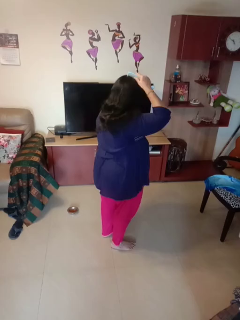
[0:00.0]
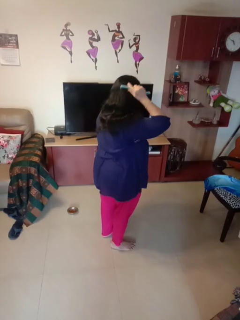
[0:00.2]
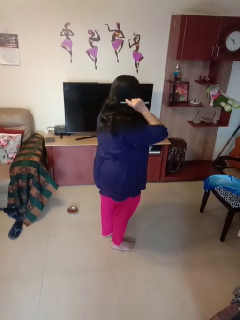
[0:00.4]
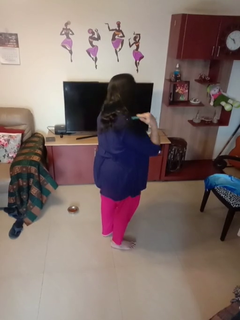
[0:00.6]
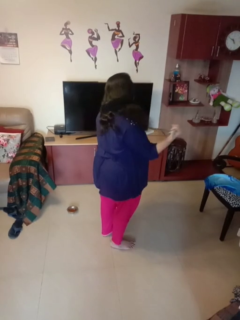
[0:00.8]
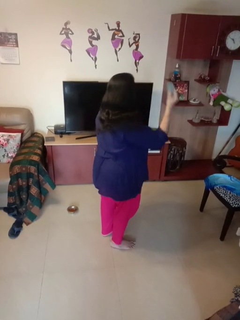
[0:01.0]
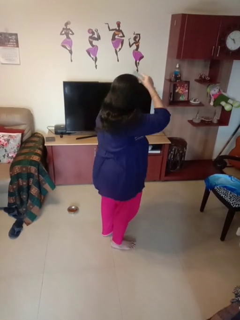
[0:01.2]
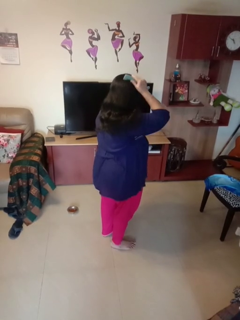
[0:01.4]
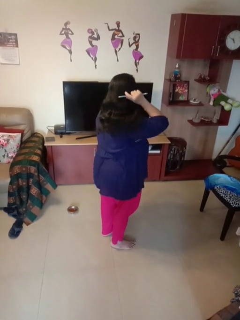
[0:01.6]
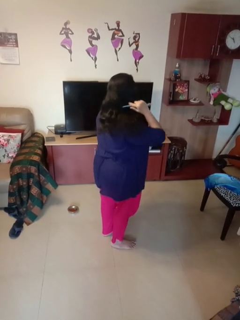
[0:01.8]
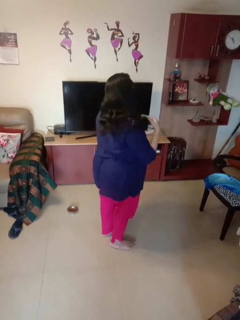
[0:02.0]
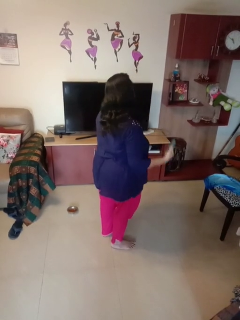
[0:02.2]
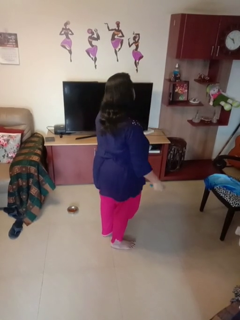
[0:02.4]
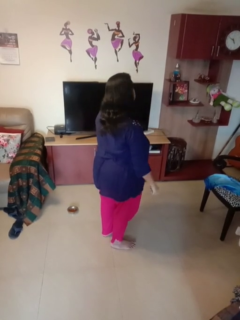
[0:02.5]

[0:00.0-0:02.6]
person brushes hair

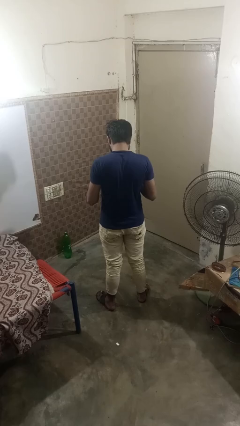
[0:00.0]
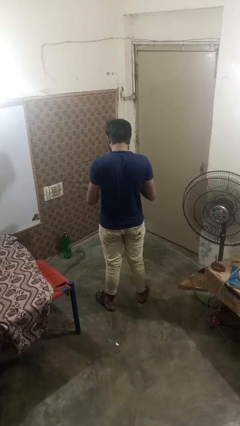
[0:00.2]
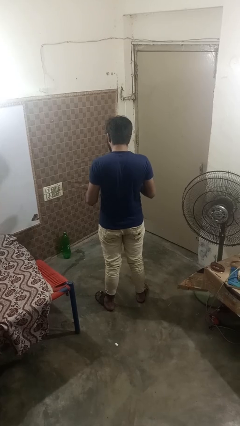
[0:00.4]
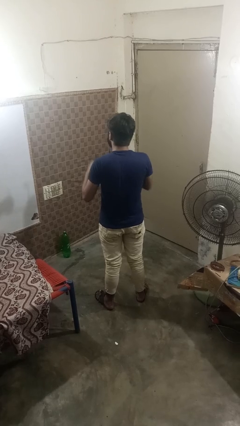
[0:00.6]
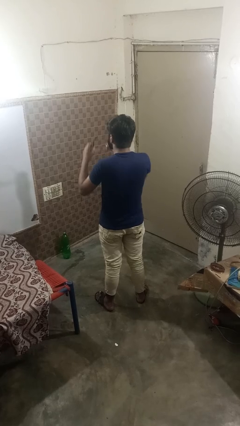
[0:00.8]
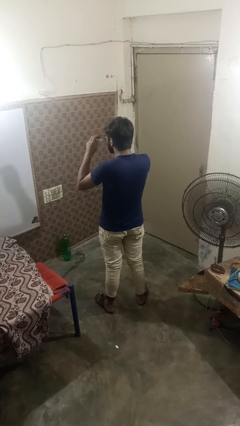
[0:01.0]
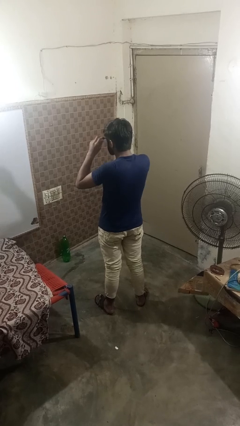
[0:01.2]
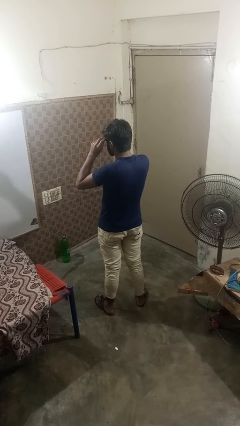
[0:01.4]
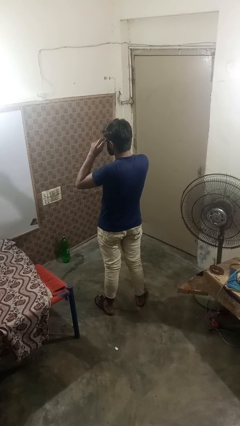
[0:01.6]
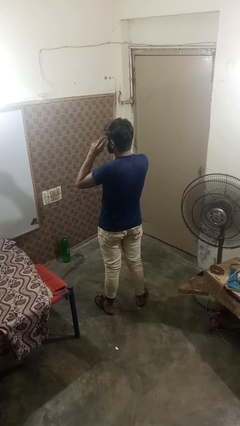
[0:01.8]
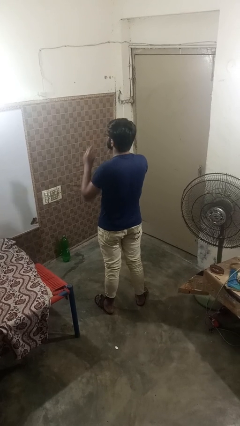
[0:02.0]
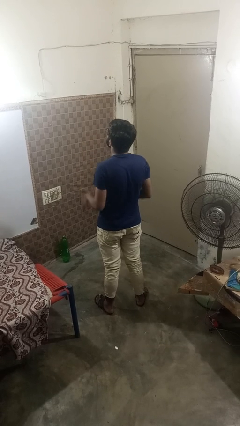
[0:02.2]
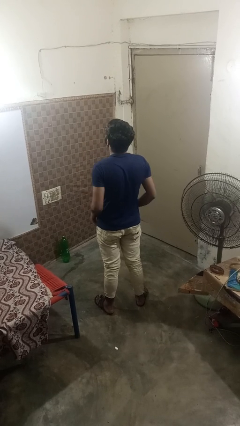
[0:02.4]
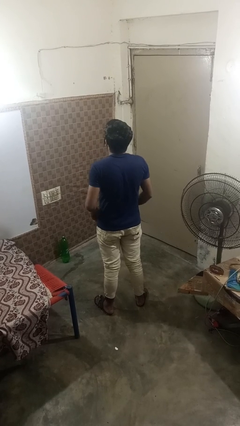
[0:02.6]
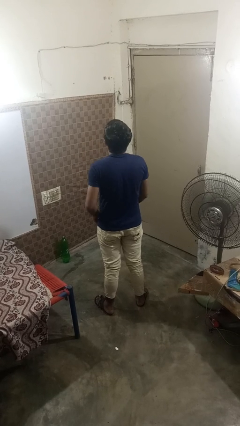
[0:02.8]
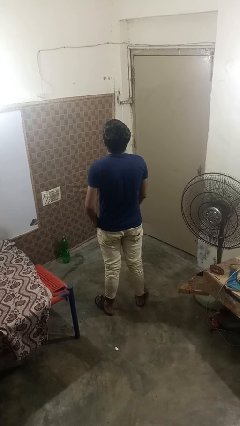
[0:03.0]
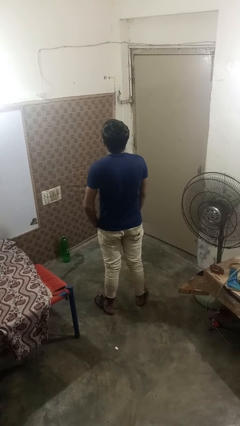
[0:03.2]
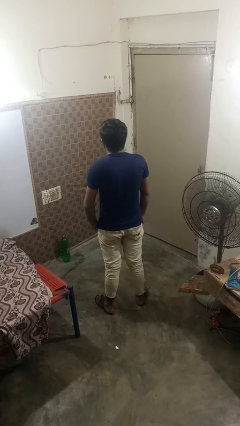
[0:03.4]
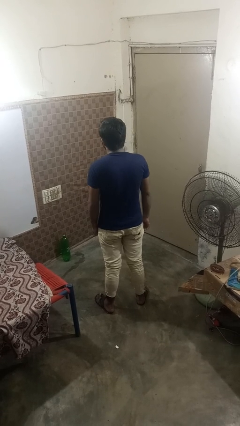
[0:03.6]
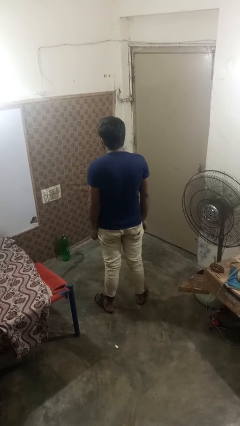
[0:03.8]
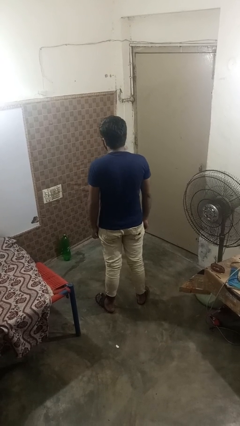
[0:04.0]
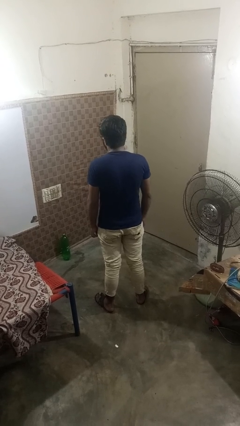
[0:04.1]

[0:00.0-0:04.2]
person puts on glasses

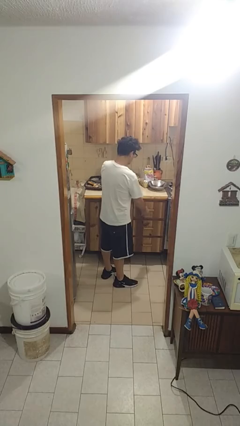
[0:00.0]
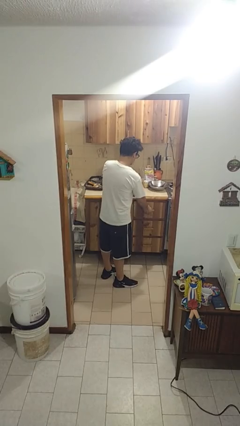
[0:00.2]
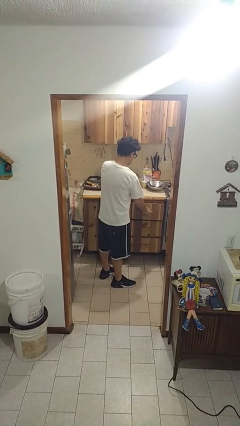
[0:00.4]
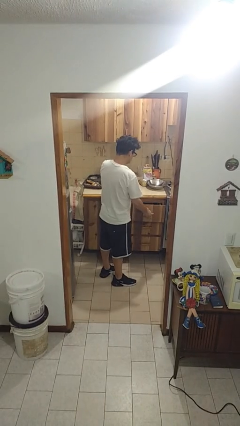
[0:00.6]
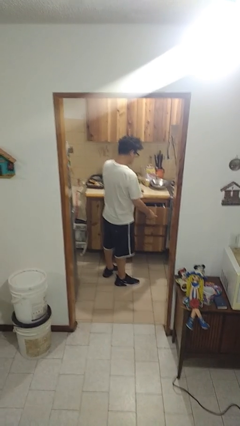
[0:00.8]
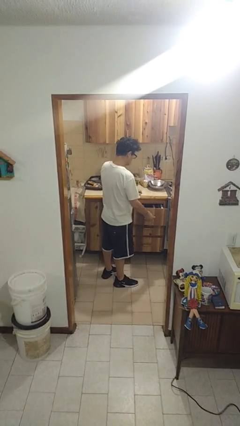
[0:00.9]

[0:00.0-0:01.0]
person opens kitchen drawer

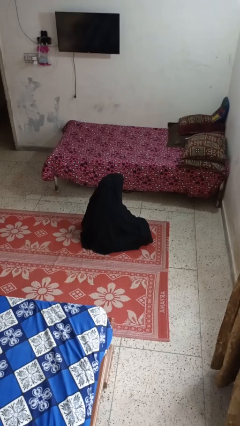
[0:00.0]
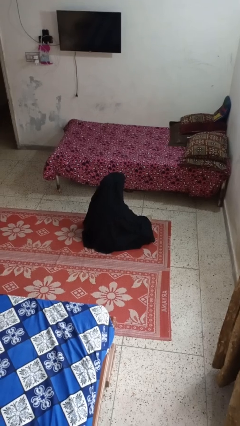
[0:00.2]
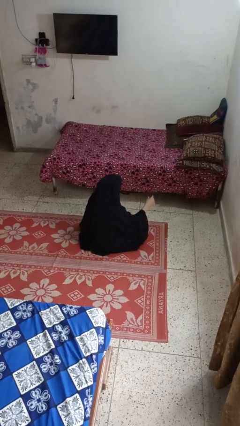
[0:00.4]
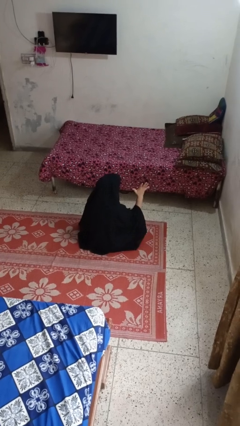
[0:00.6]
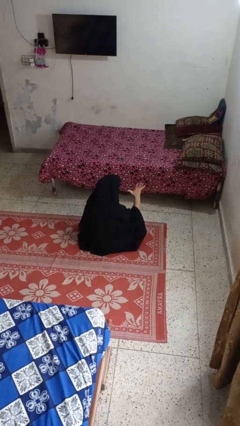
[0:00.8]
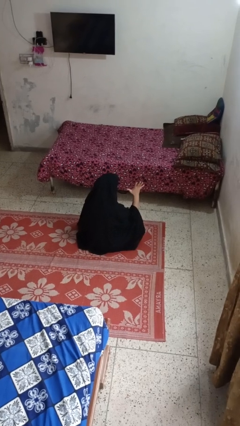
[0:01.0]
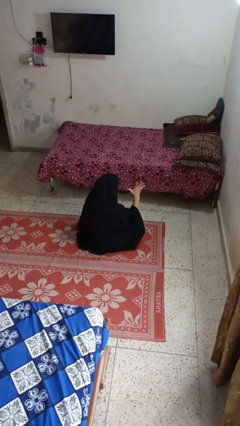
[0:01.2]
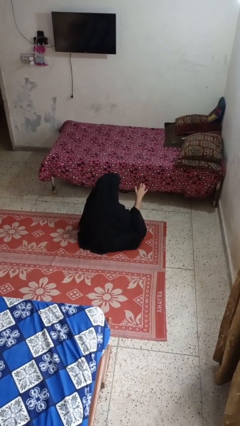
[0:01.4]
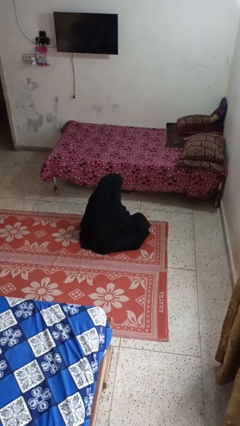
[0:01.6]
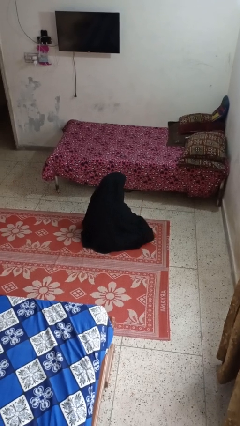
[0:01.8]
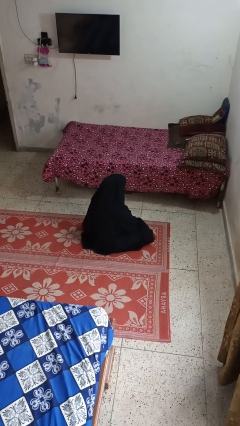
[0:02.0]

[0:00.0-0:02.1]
person gestures number five

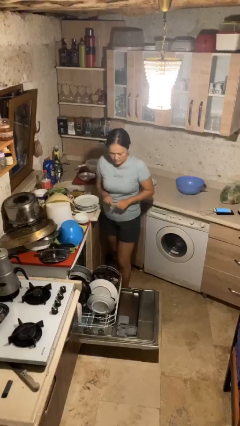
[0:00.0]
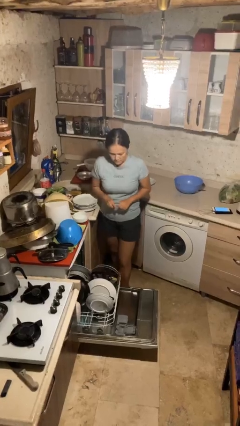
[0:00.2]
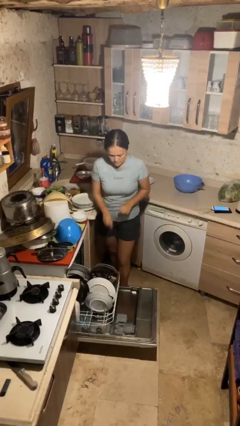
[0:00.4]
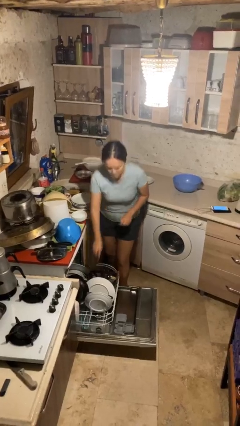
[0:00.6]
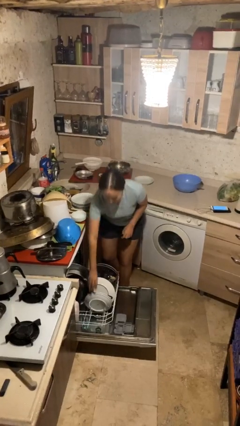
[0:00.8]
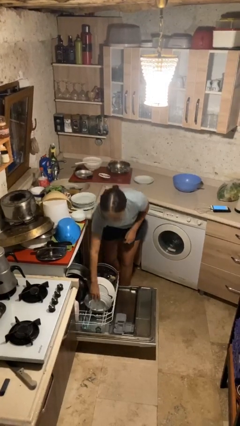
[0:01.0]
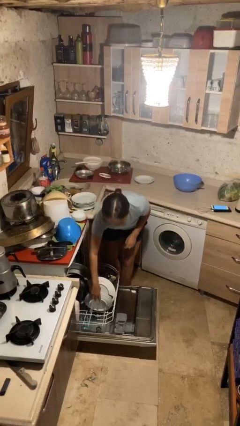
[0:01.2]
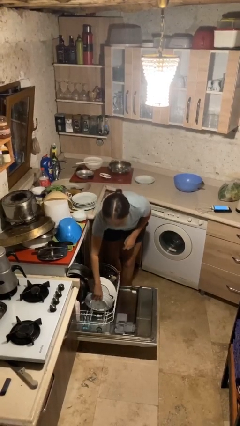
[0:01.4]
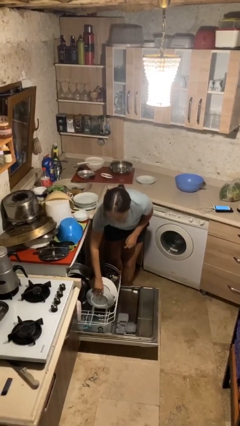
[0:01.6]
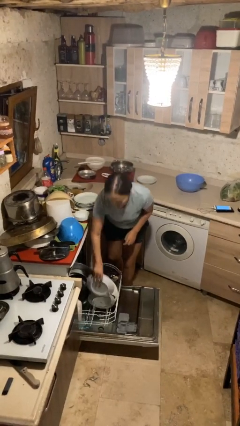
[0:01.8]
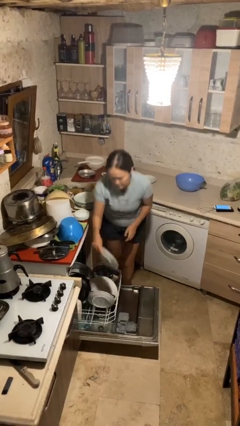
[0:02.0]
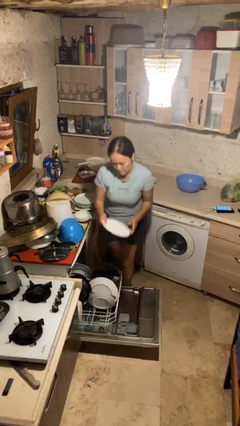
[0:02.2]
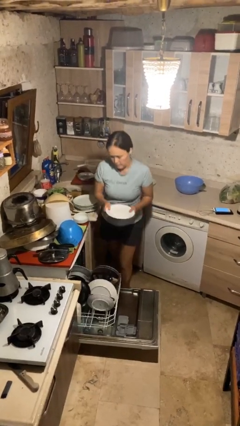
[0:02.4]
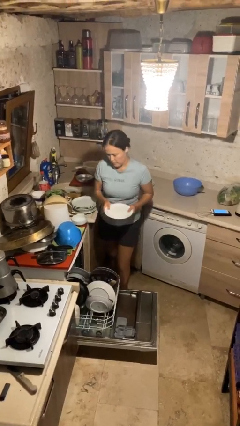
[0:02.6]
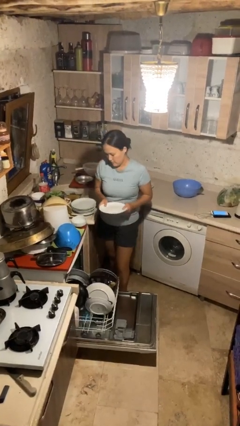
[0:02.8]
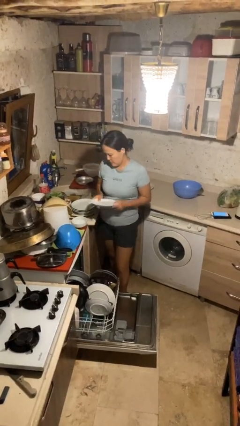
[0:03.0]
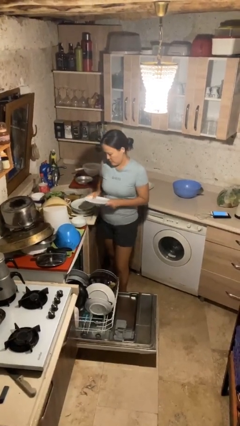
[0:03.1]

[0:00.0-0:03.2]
person unloads dishwasher

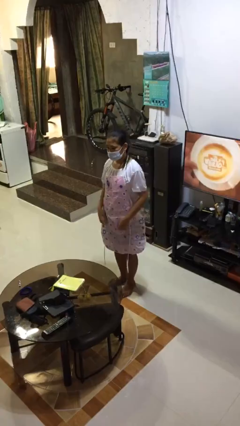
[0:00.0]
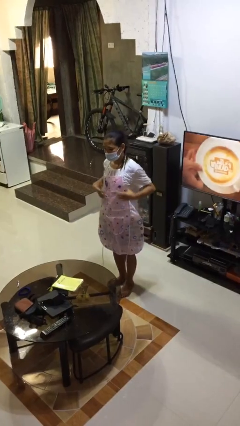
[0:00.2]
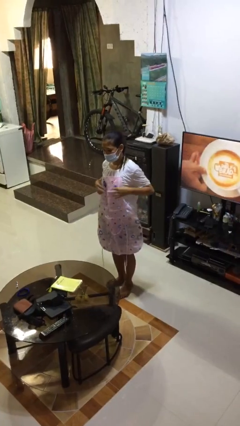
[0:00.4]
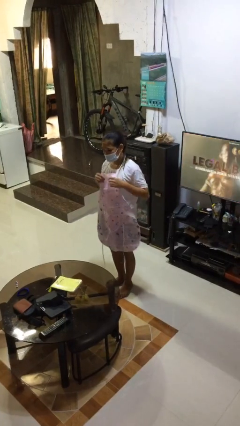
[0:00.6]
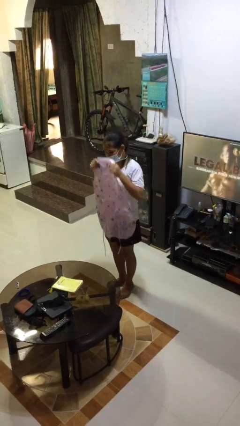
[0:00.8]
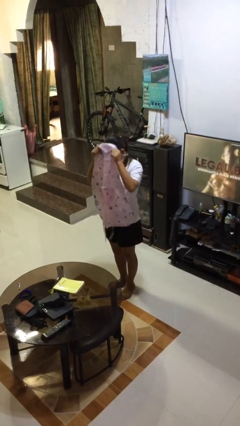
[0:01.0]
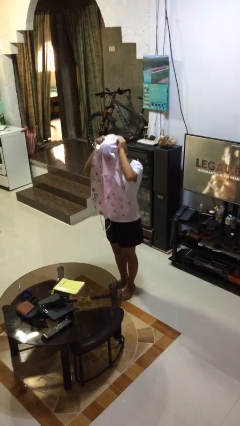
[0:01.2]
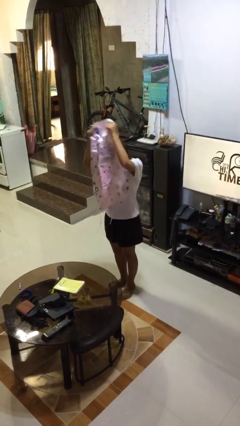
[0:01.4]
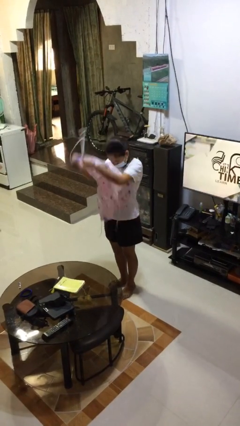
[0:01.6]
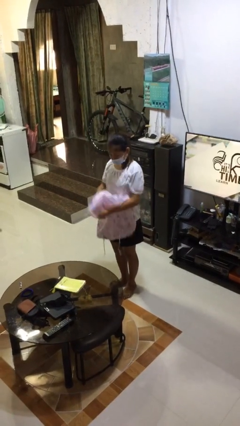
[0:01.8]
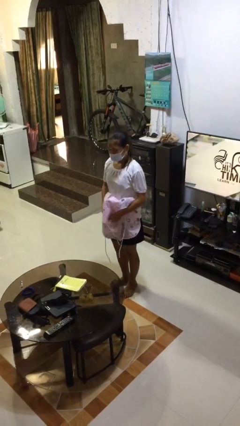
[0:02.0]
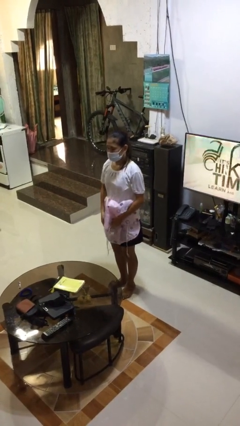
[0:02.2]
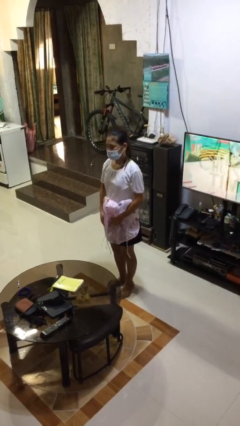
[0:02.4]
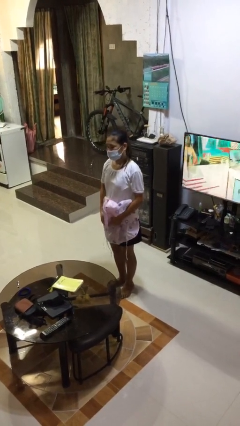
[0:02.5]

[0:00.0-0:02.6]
person takes off apron

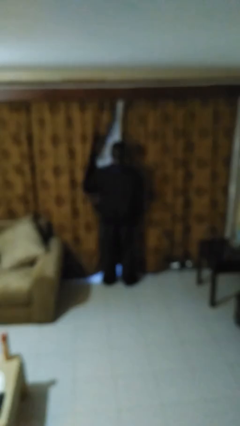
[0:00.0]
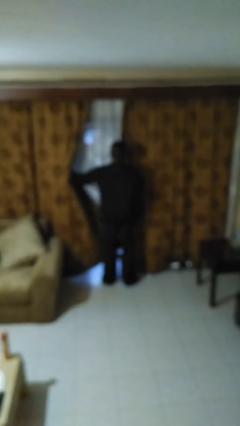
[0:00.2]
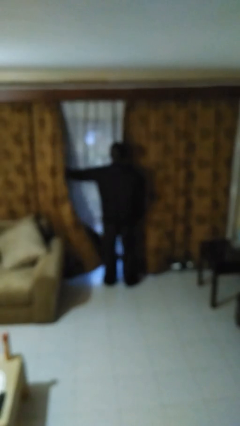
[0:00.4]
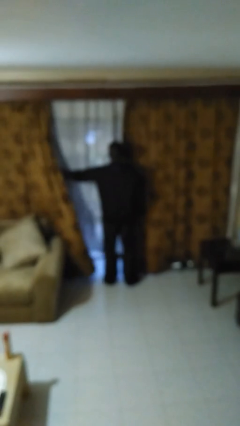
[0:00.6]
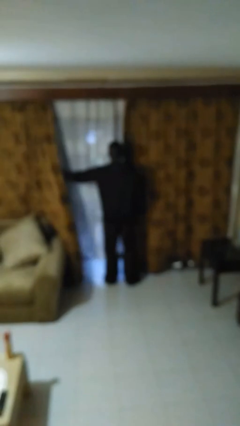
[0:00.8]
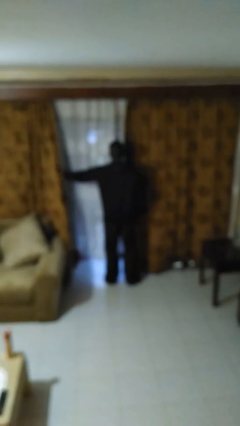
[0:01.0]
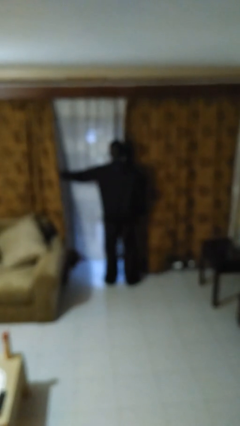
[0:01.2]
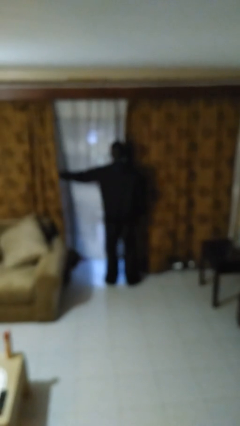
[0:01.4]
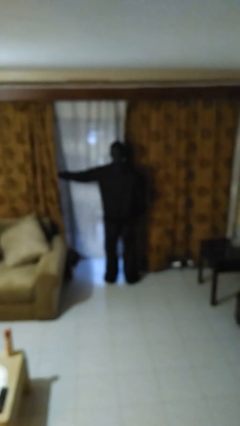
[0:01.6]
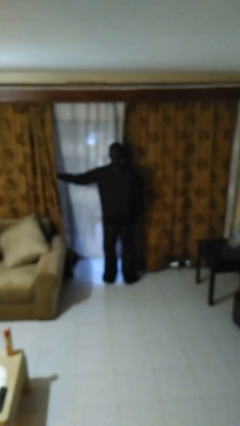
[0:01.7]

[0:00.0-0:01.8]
person opens curtains

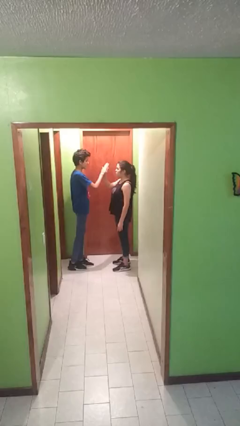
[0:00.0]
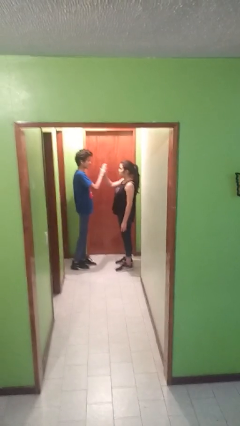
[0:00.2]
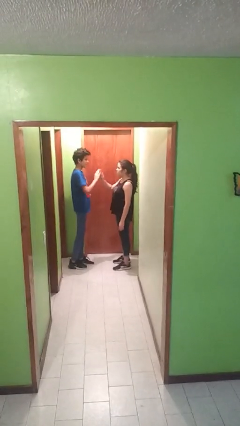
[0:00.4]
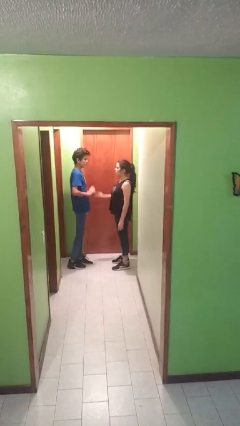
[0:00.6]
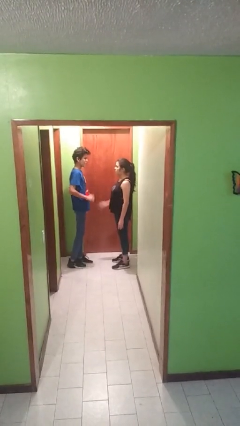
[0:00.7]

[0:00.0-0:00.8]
person highfives hand
